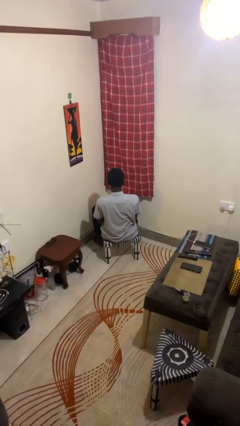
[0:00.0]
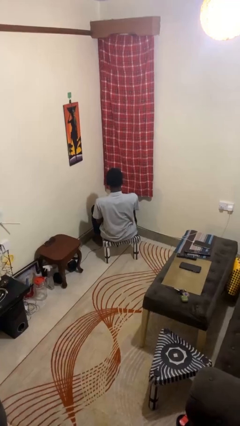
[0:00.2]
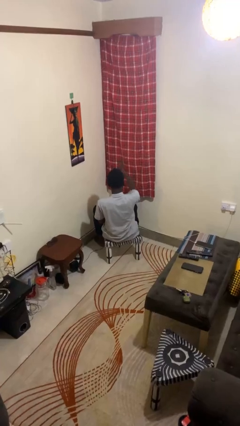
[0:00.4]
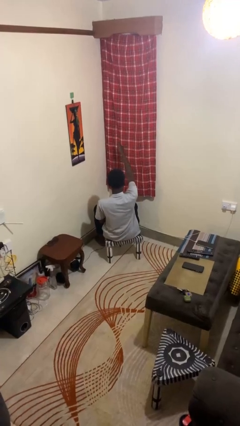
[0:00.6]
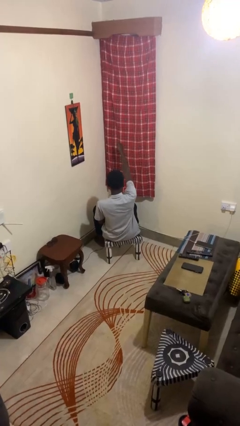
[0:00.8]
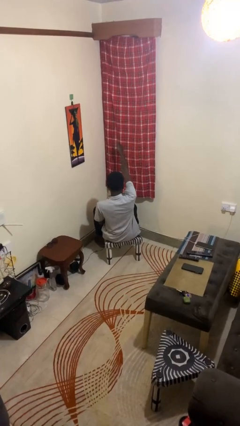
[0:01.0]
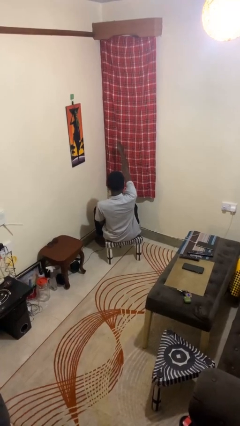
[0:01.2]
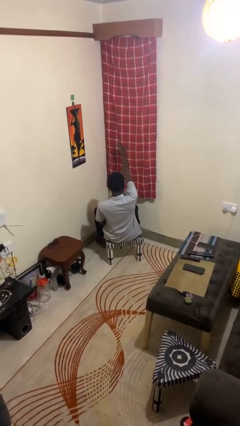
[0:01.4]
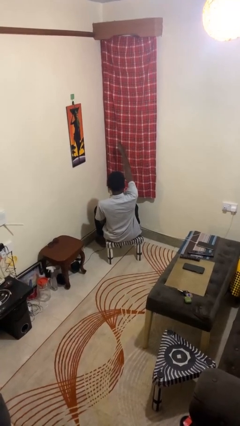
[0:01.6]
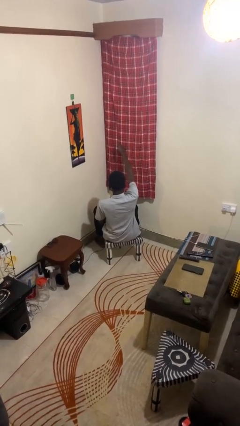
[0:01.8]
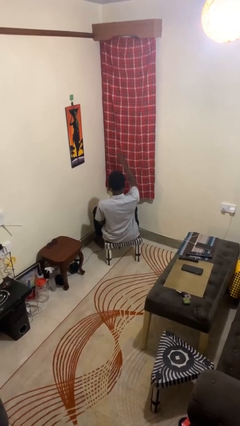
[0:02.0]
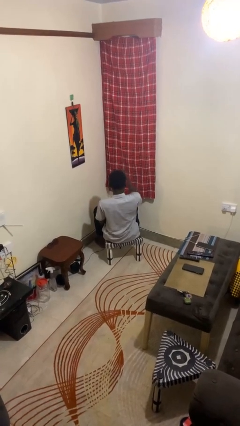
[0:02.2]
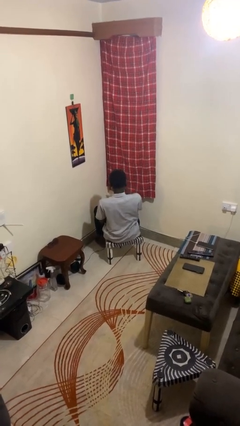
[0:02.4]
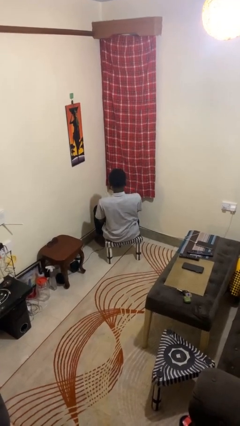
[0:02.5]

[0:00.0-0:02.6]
person gestures thumbs up

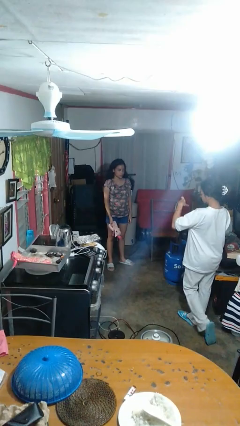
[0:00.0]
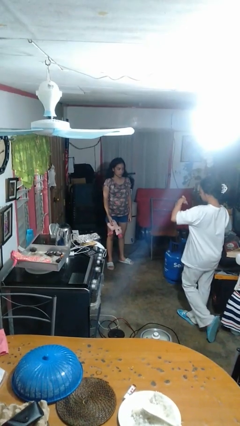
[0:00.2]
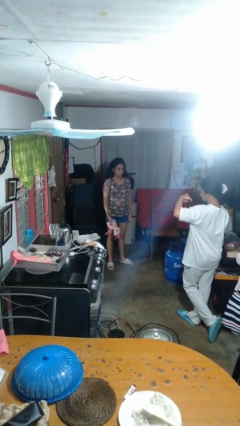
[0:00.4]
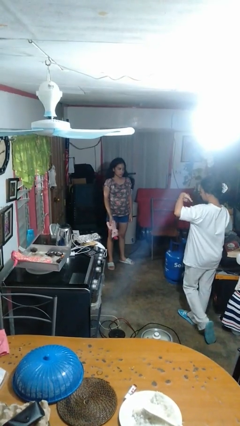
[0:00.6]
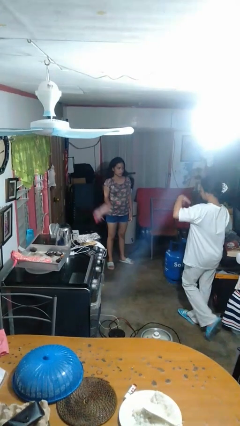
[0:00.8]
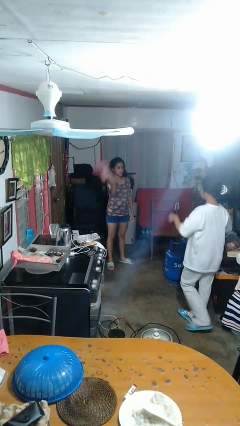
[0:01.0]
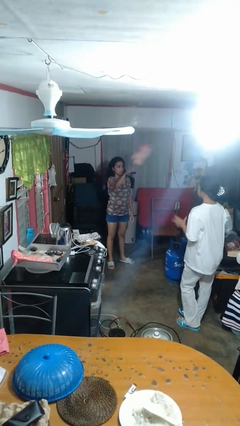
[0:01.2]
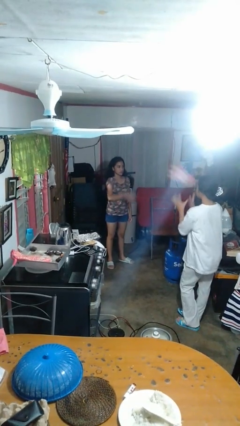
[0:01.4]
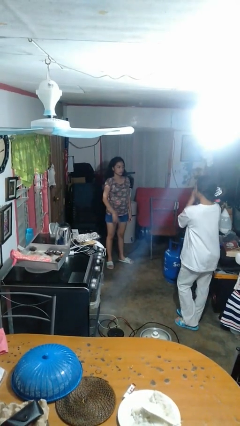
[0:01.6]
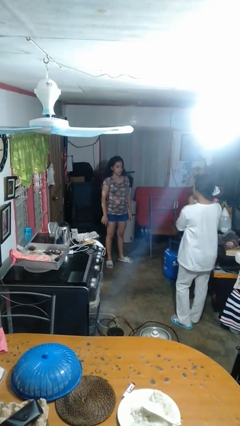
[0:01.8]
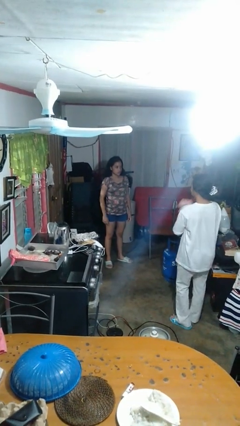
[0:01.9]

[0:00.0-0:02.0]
person throws object to person

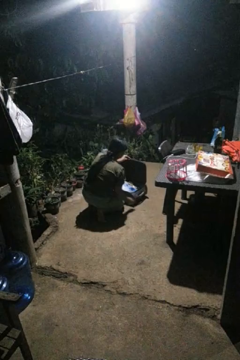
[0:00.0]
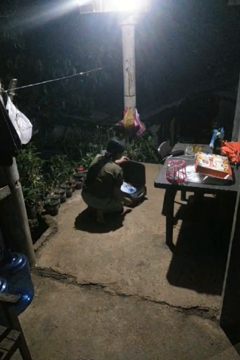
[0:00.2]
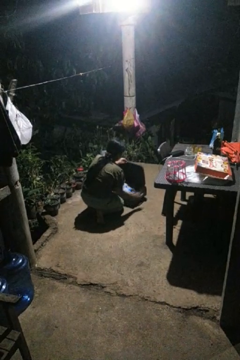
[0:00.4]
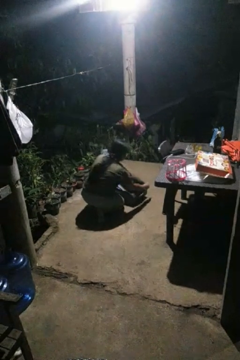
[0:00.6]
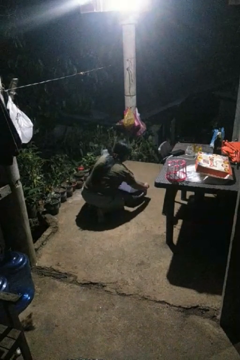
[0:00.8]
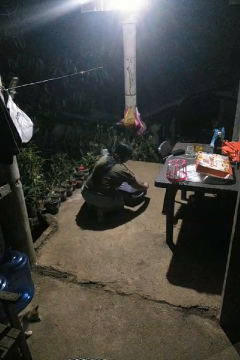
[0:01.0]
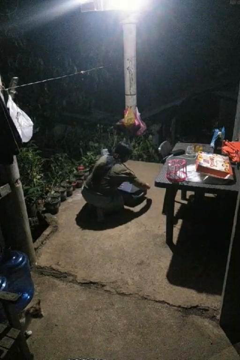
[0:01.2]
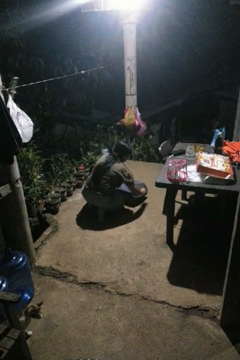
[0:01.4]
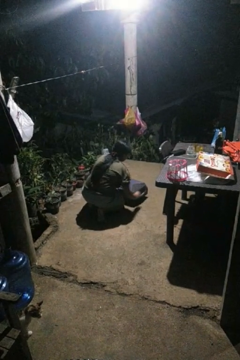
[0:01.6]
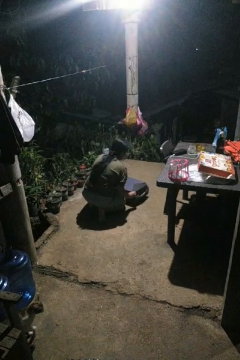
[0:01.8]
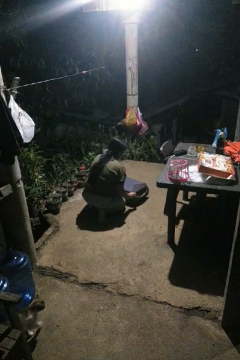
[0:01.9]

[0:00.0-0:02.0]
person closes suitcase

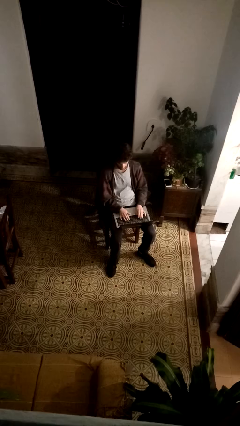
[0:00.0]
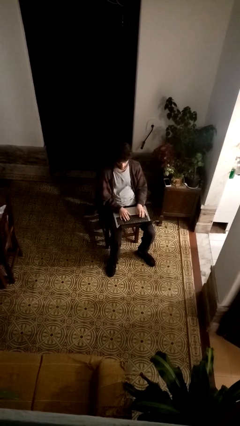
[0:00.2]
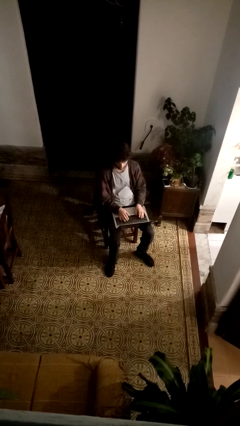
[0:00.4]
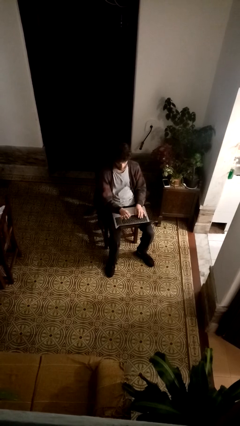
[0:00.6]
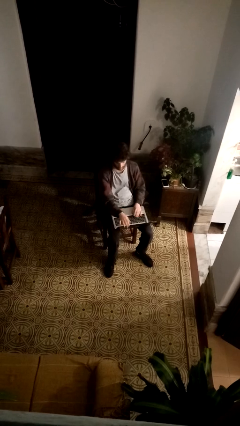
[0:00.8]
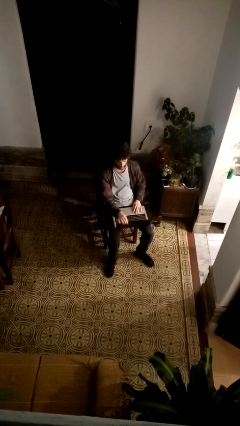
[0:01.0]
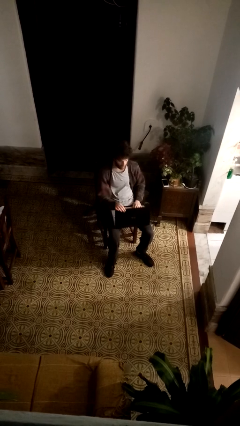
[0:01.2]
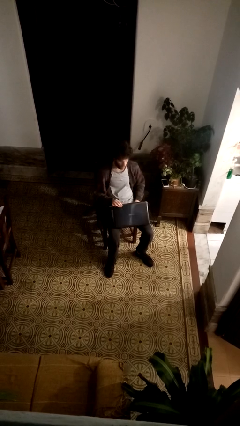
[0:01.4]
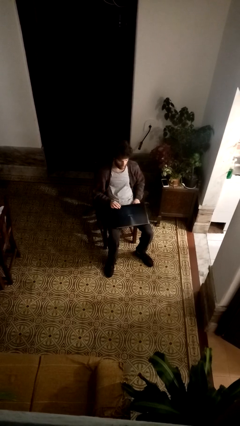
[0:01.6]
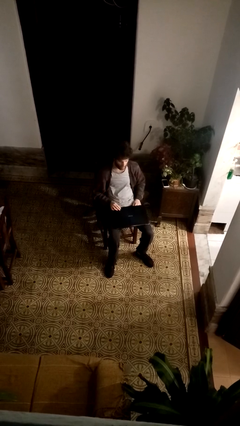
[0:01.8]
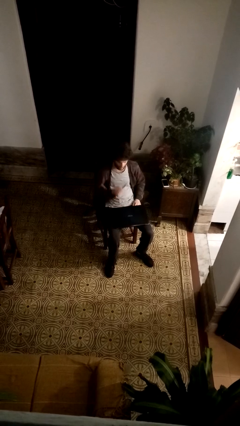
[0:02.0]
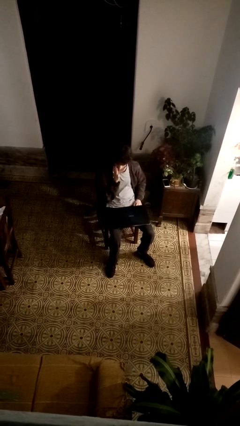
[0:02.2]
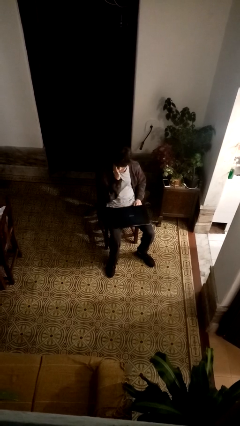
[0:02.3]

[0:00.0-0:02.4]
person closes laptop

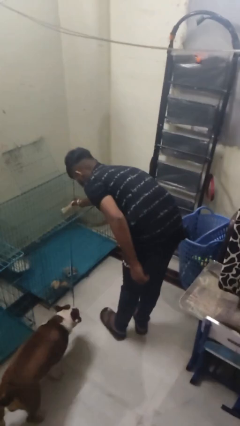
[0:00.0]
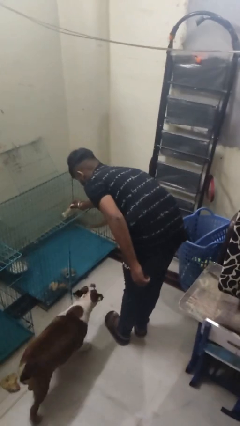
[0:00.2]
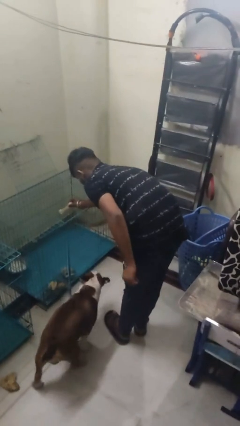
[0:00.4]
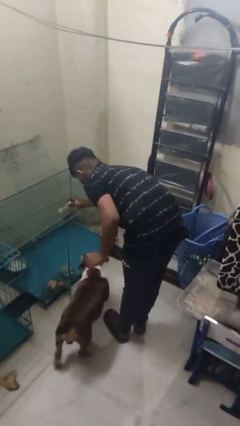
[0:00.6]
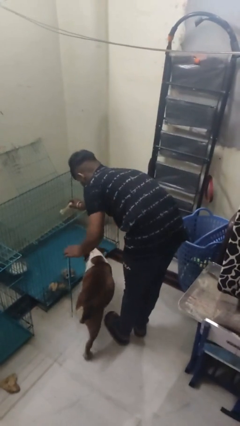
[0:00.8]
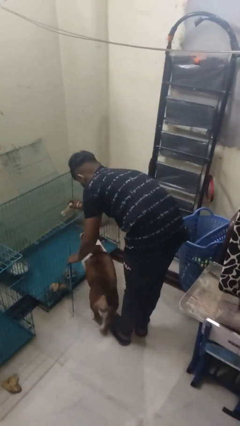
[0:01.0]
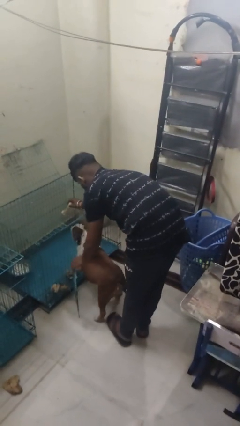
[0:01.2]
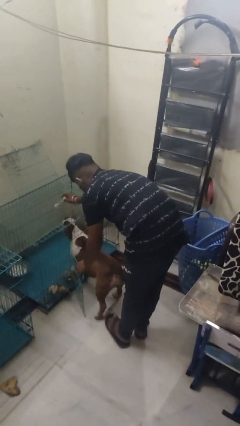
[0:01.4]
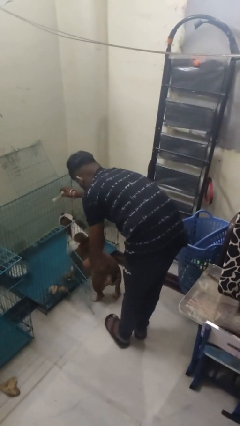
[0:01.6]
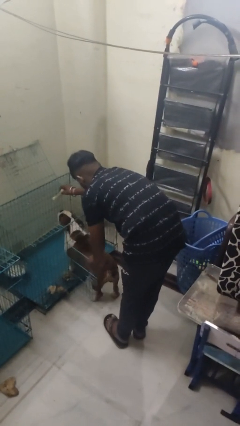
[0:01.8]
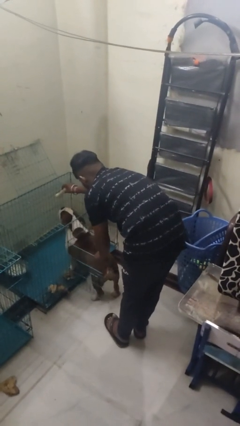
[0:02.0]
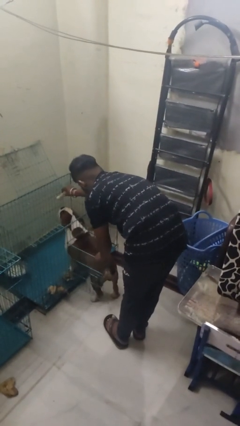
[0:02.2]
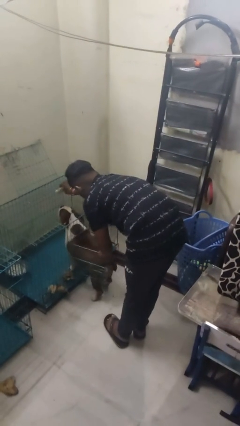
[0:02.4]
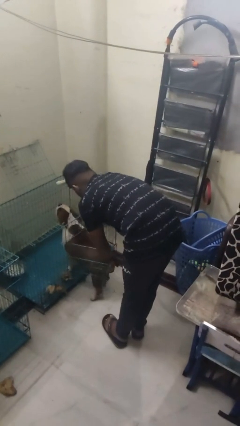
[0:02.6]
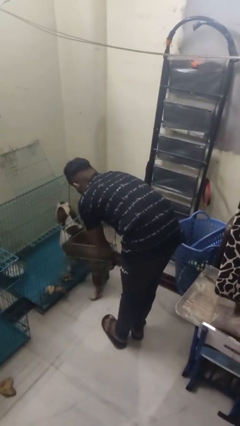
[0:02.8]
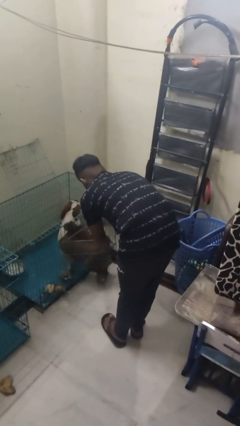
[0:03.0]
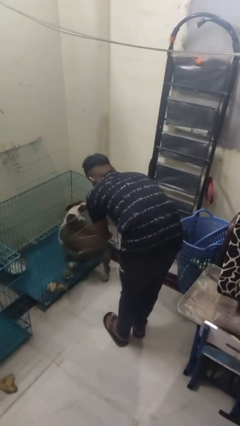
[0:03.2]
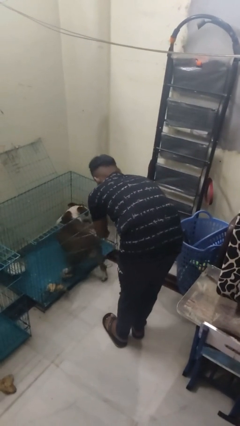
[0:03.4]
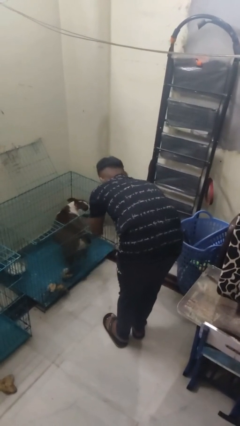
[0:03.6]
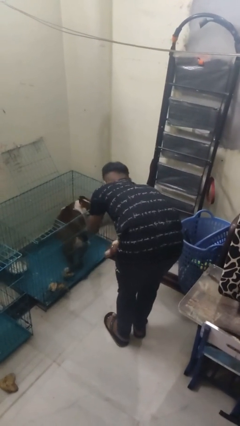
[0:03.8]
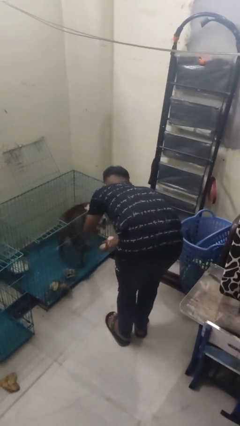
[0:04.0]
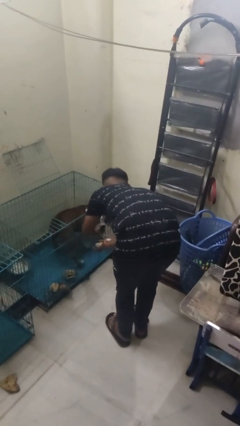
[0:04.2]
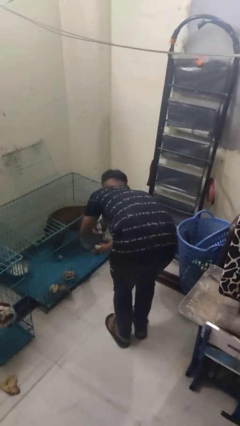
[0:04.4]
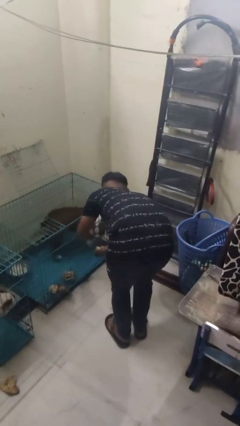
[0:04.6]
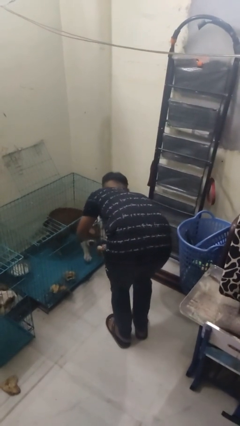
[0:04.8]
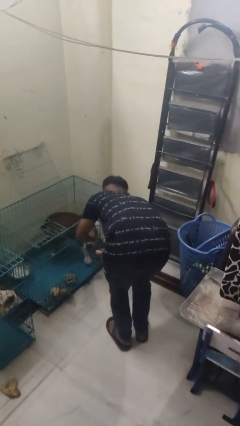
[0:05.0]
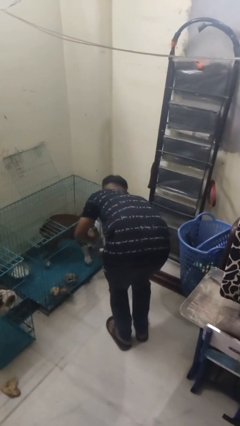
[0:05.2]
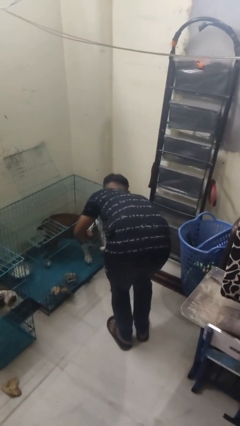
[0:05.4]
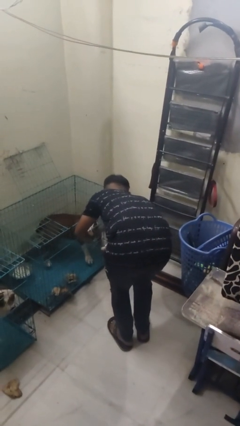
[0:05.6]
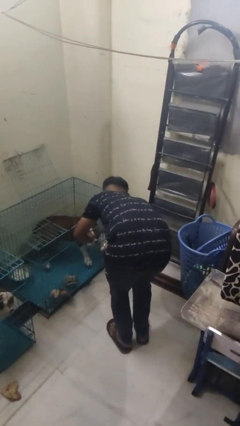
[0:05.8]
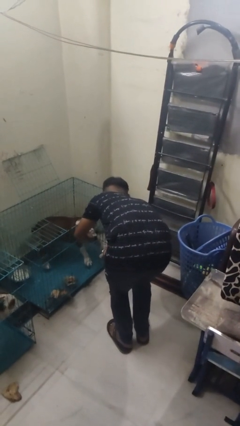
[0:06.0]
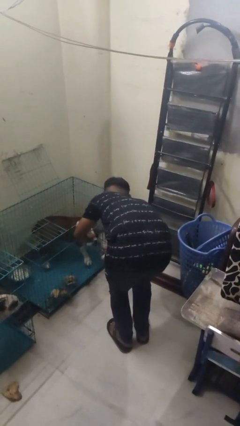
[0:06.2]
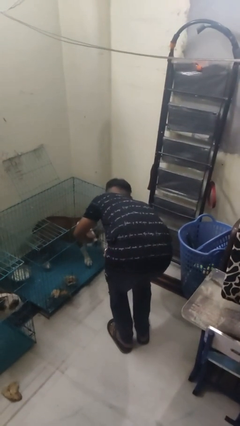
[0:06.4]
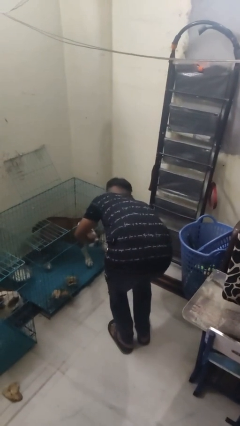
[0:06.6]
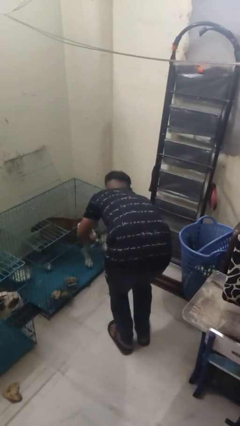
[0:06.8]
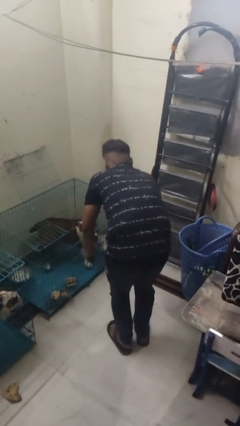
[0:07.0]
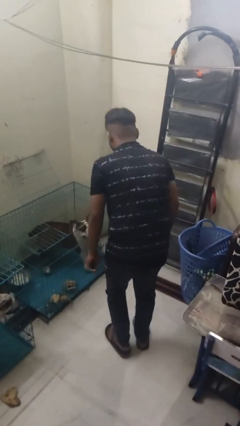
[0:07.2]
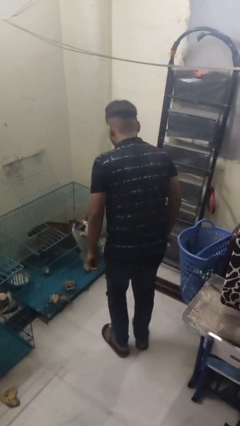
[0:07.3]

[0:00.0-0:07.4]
person crates dog

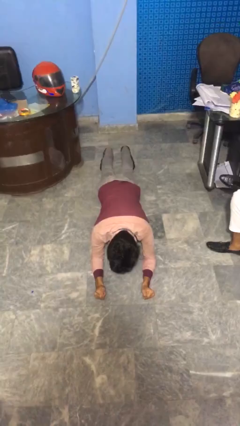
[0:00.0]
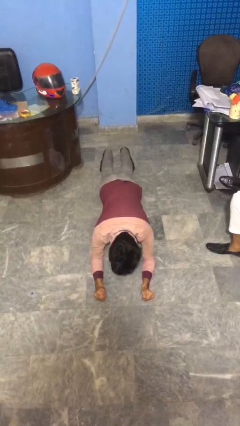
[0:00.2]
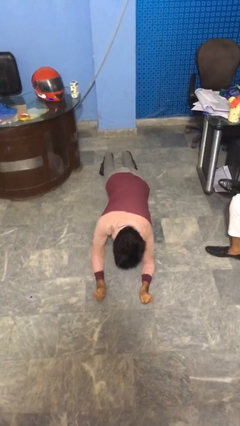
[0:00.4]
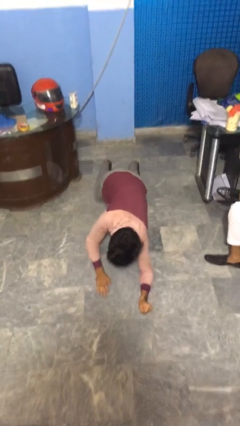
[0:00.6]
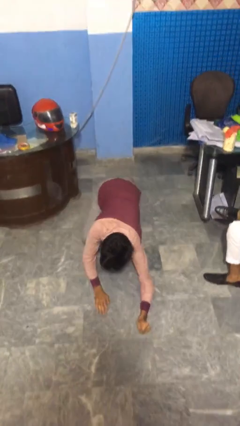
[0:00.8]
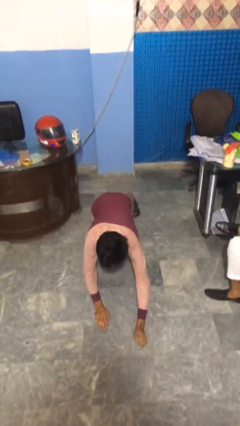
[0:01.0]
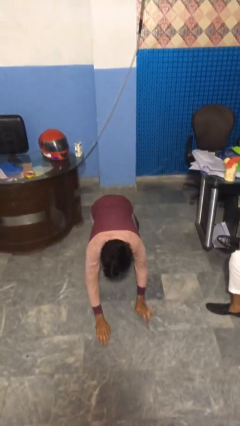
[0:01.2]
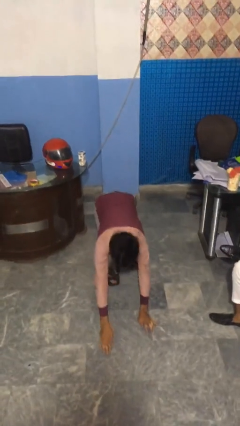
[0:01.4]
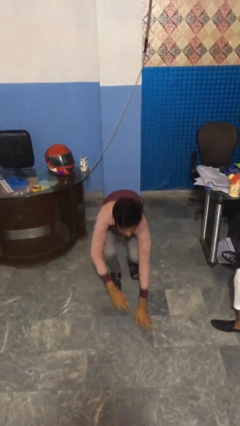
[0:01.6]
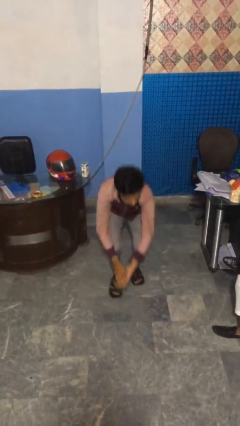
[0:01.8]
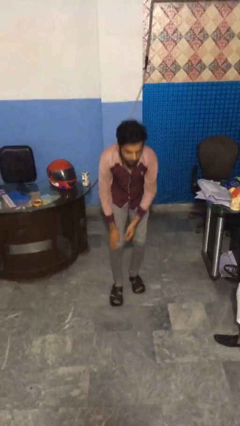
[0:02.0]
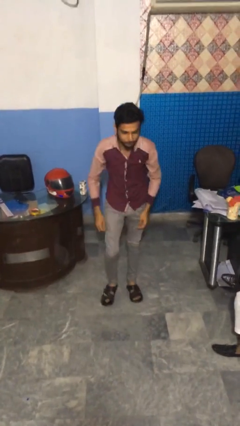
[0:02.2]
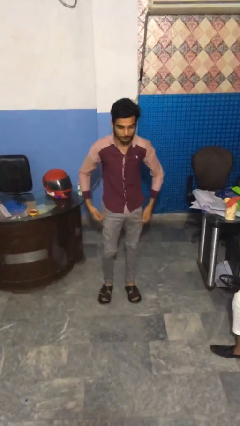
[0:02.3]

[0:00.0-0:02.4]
person stands up from floor
